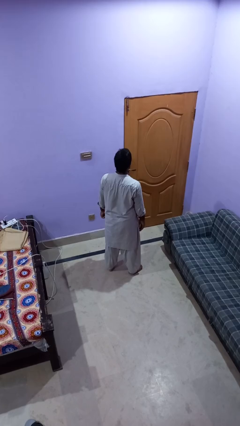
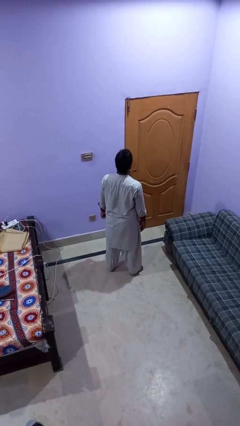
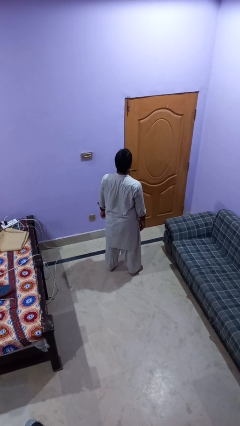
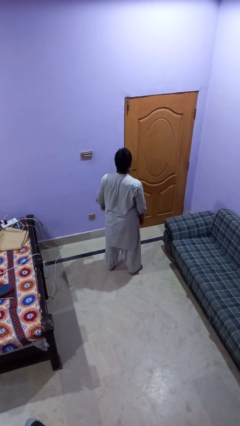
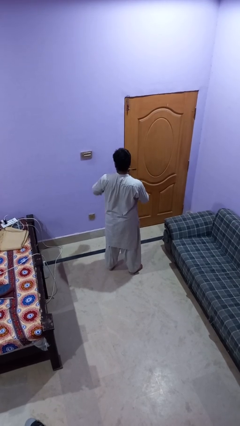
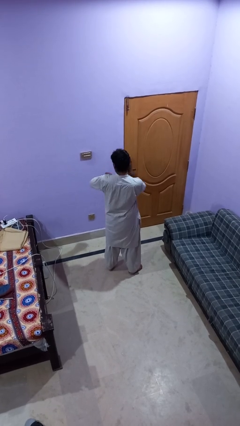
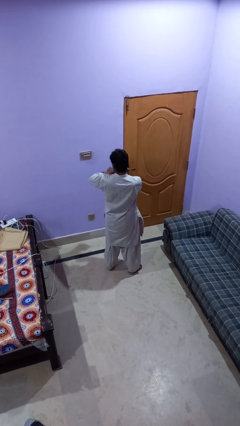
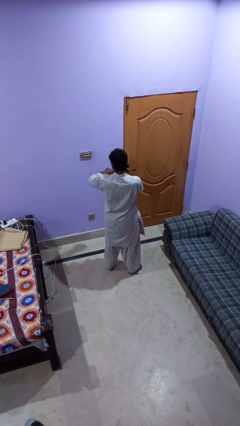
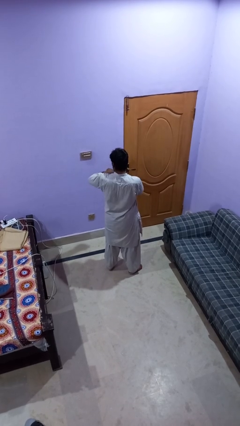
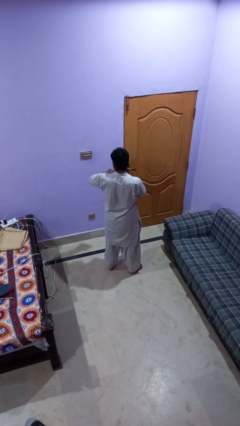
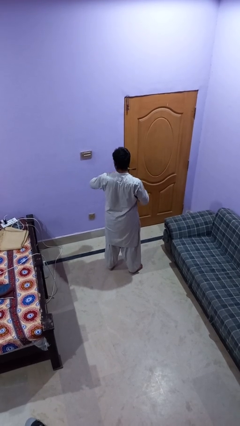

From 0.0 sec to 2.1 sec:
person swats bug

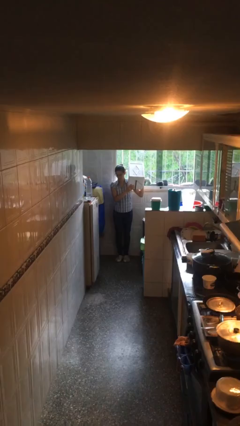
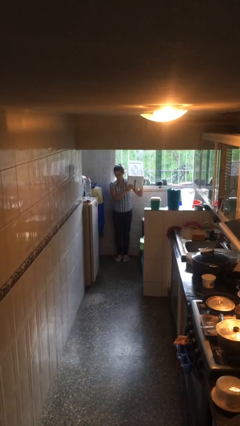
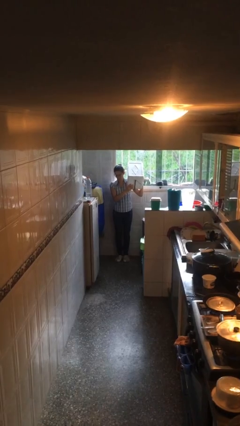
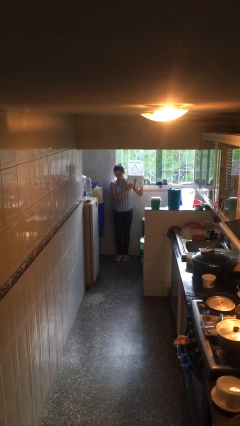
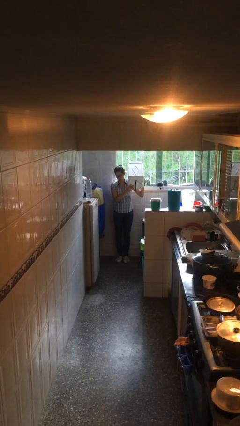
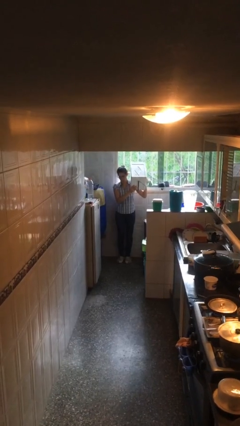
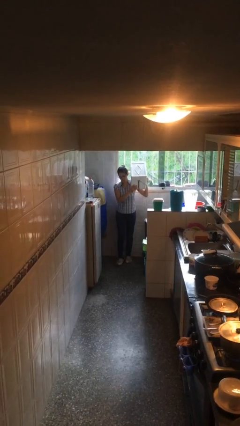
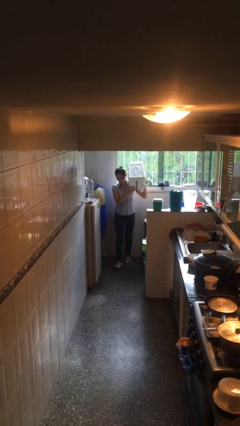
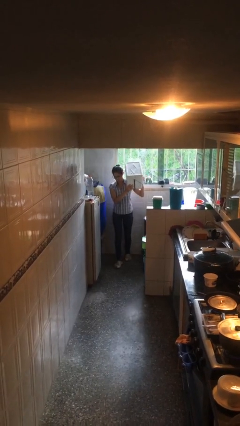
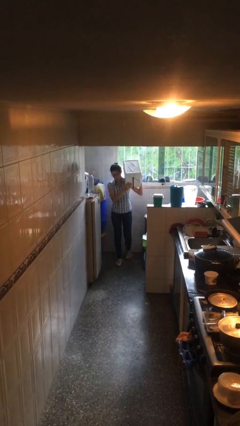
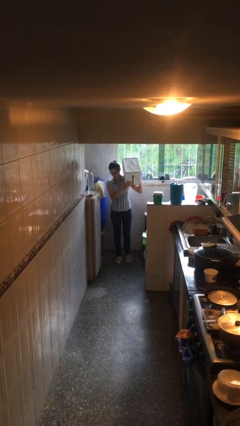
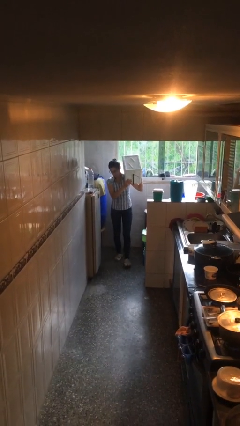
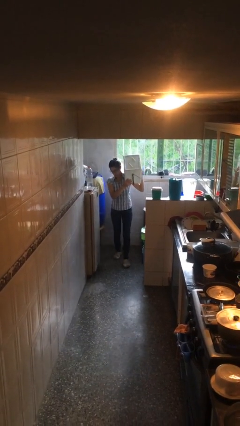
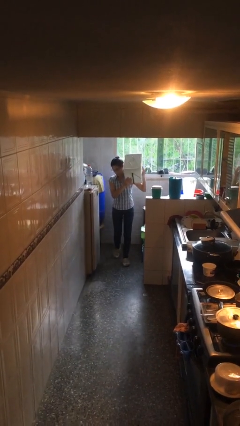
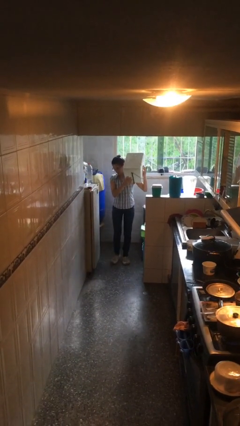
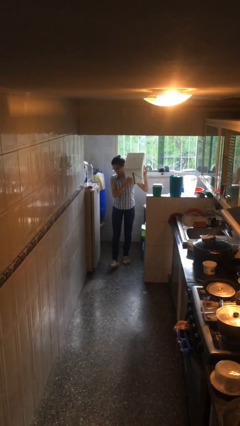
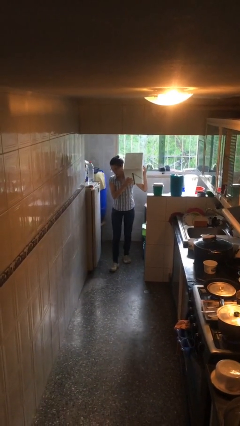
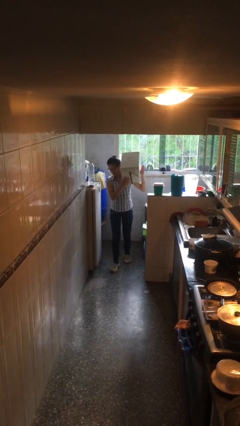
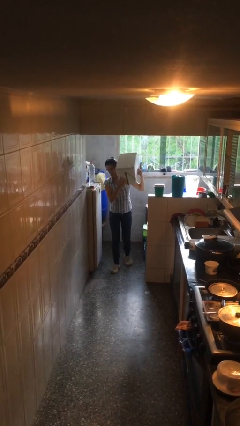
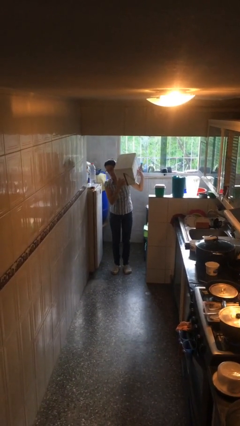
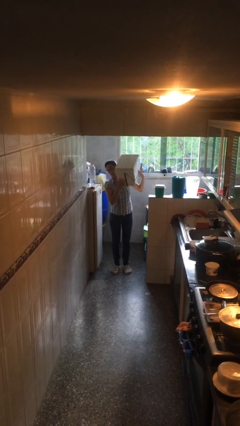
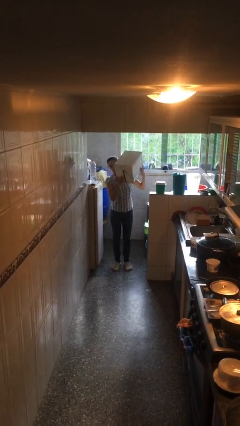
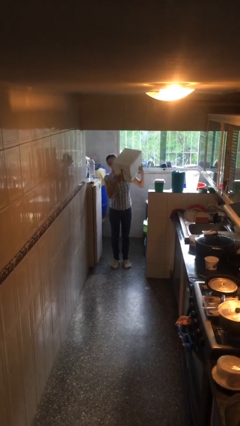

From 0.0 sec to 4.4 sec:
person carries heavy object

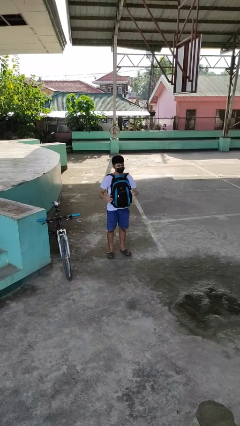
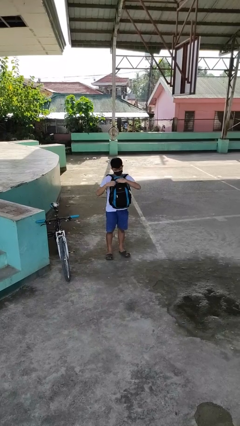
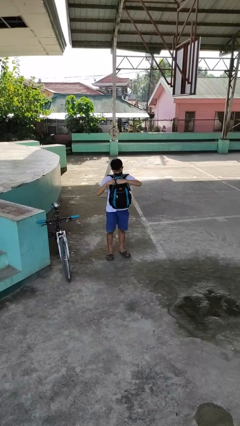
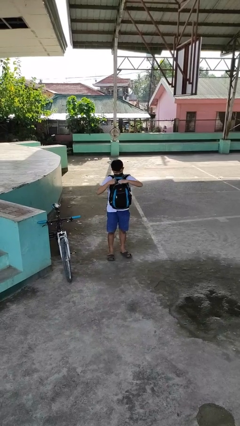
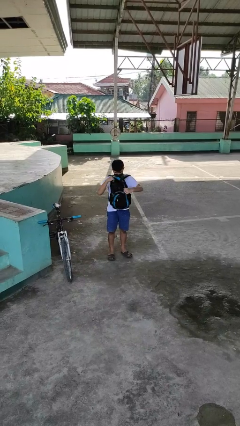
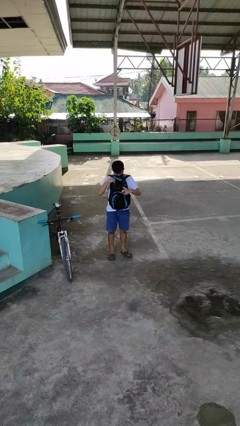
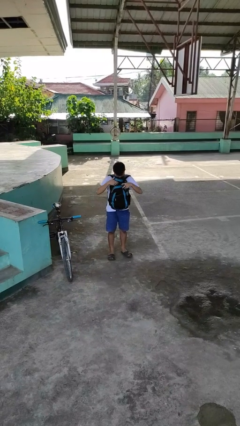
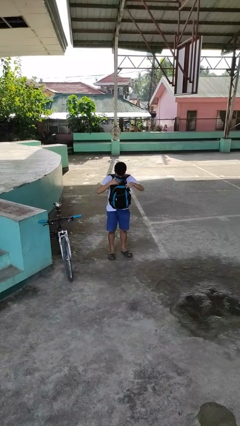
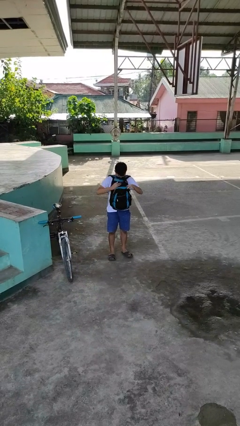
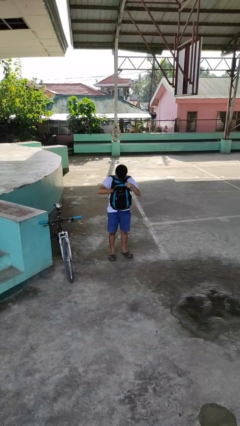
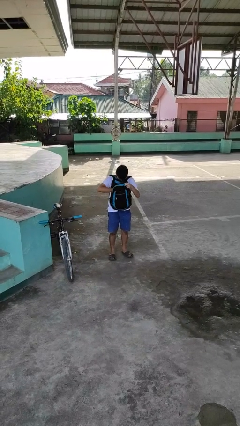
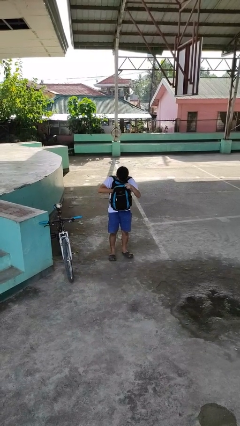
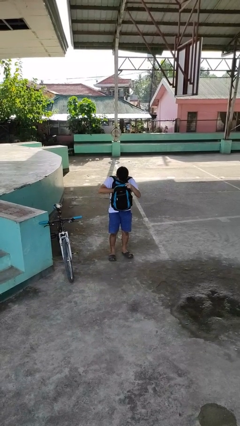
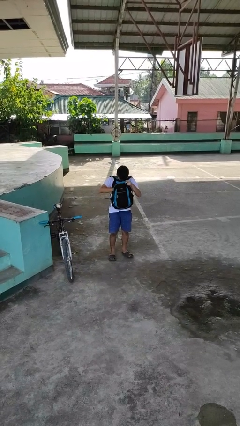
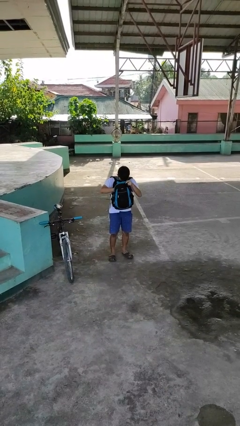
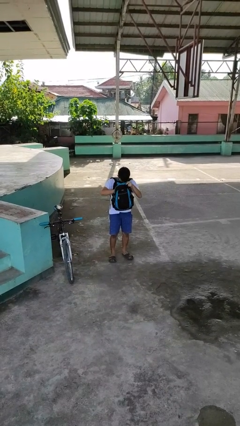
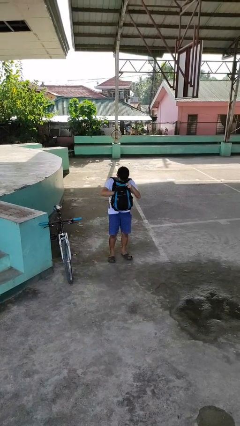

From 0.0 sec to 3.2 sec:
person searches in backpack

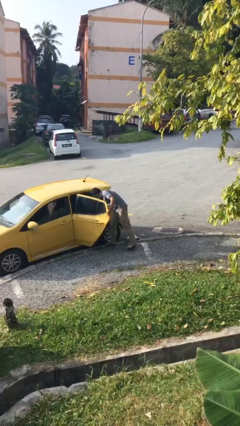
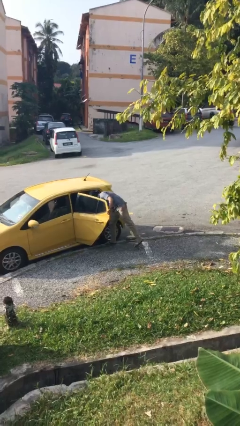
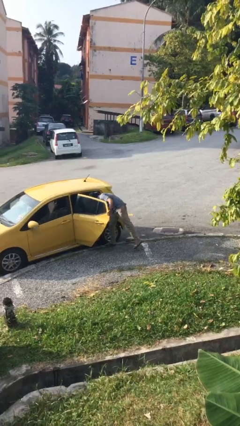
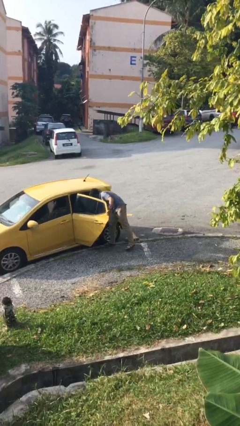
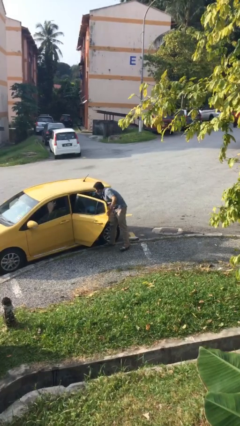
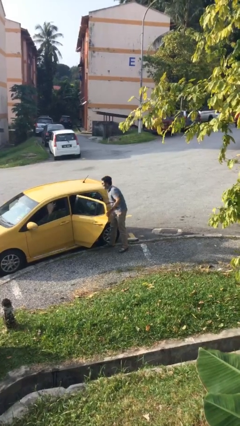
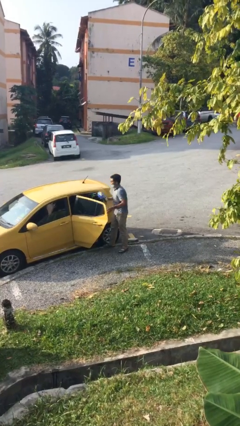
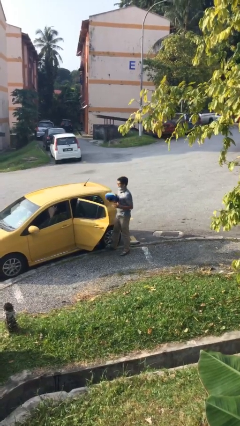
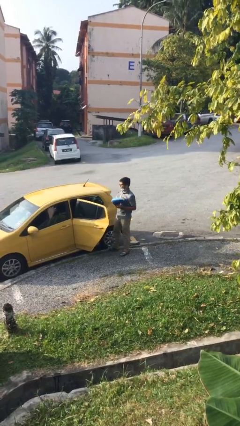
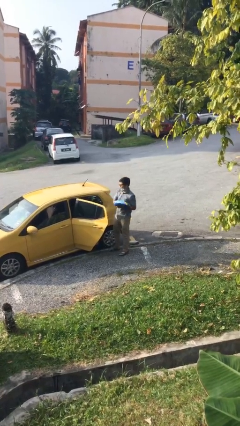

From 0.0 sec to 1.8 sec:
person unloads car

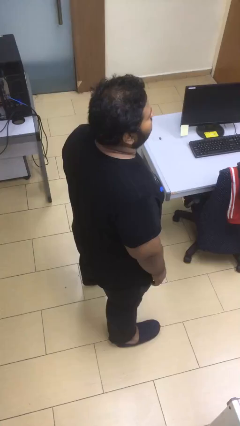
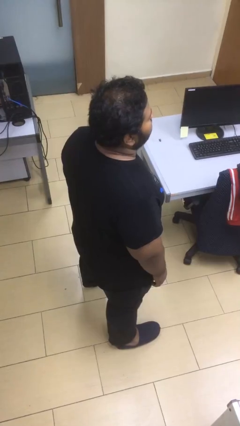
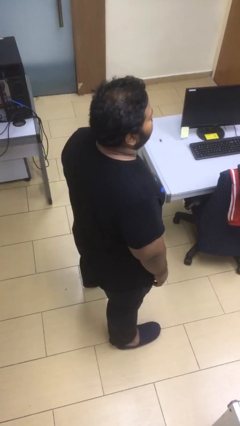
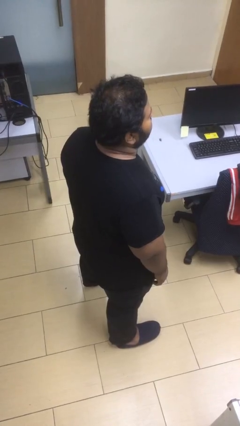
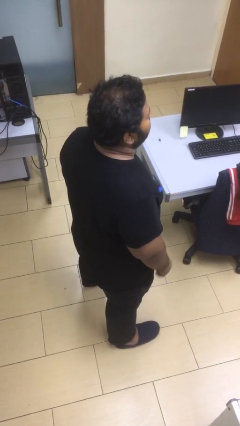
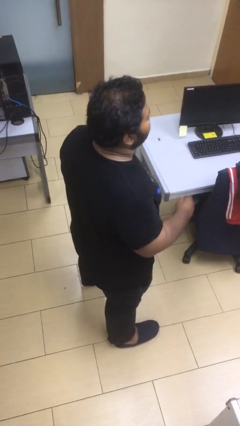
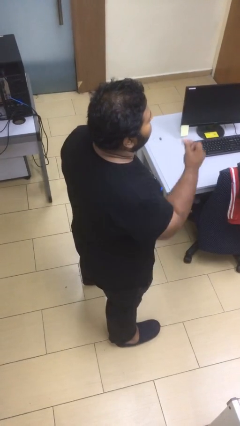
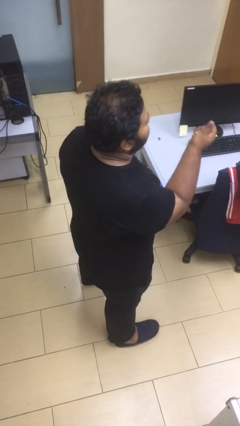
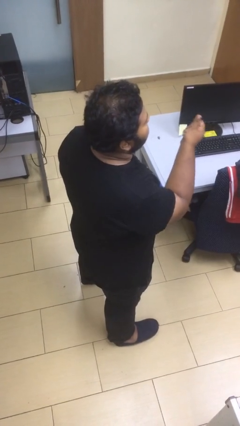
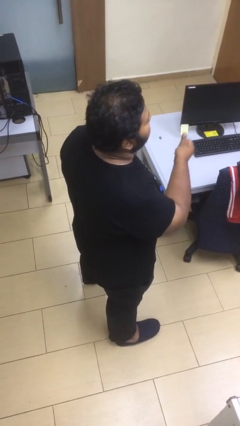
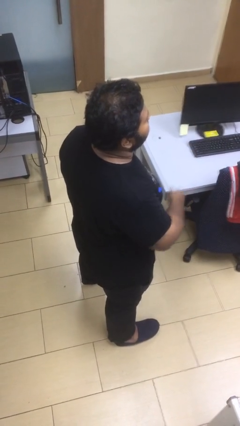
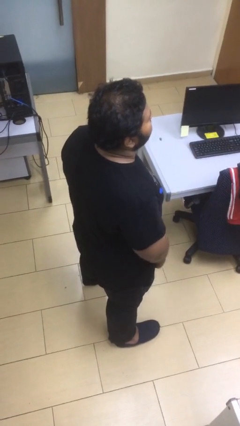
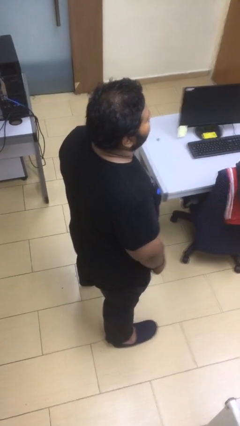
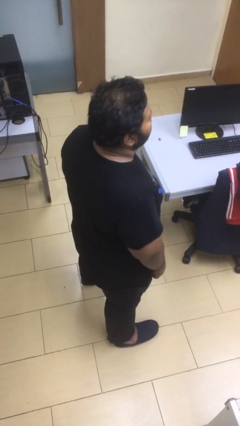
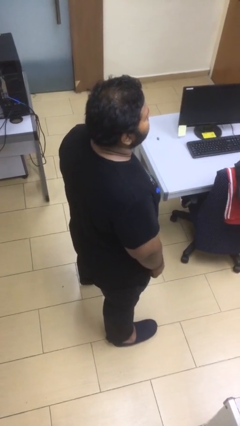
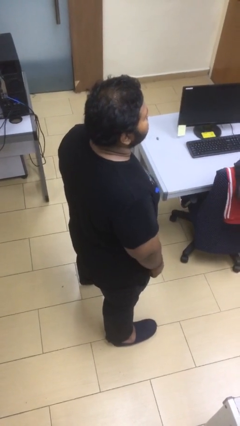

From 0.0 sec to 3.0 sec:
person snaps fingers

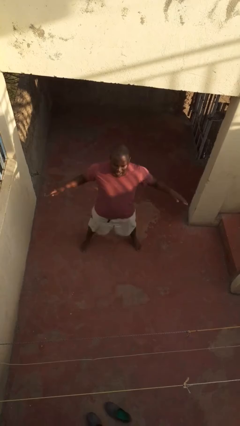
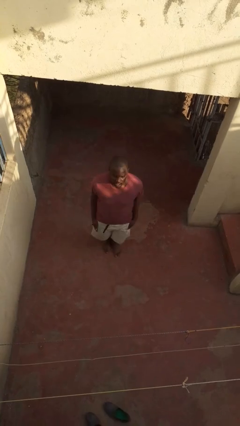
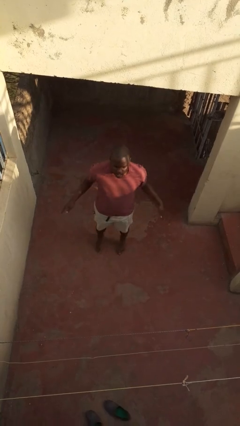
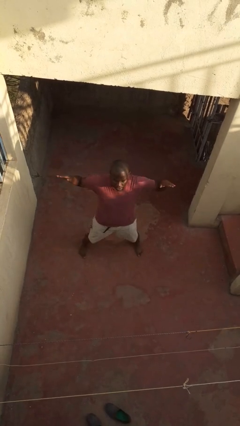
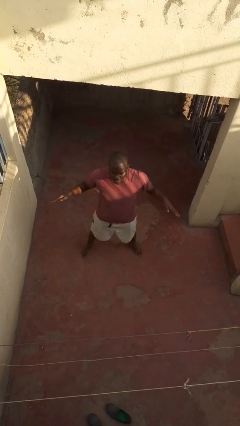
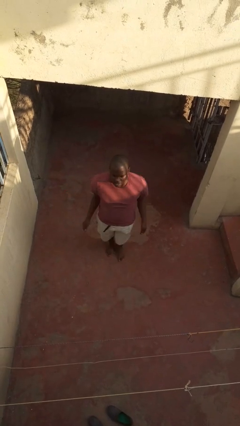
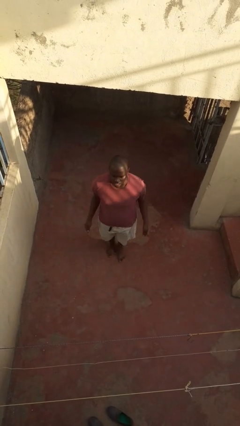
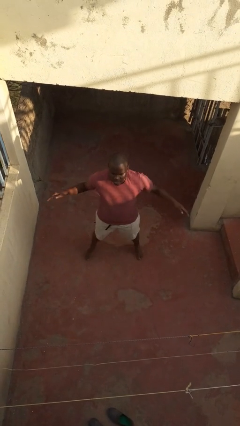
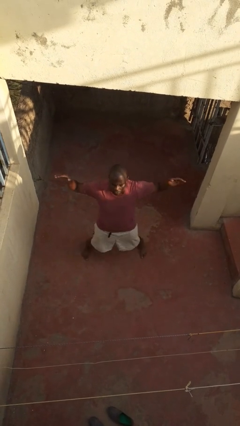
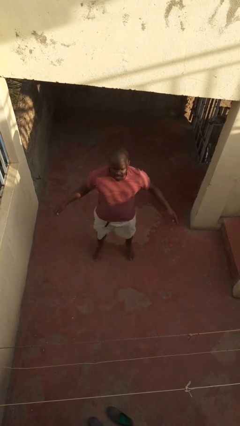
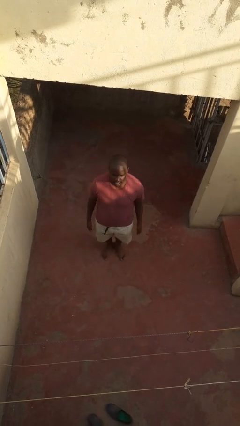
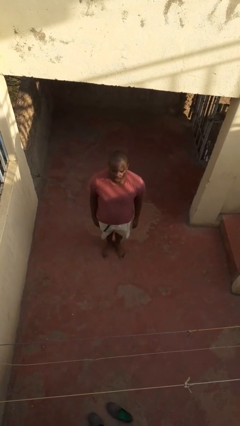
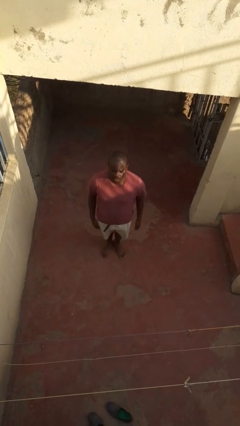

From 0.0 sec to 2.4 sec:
person exercises with jumping jacks

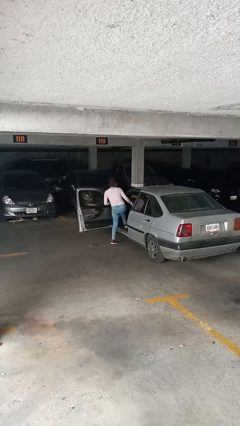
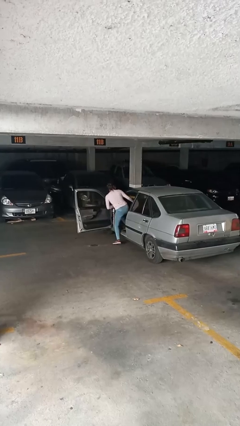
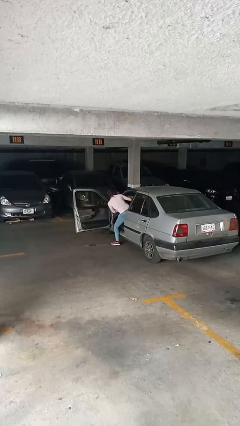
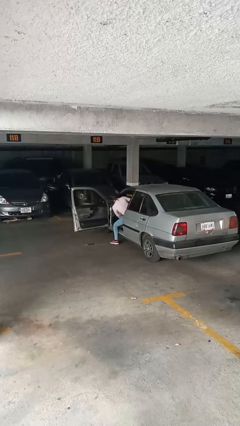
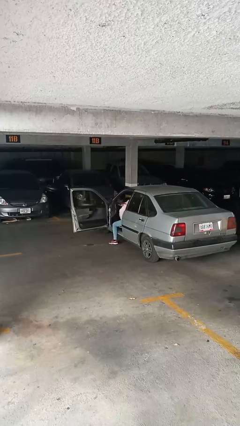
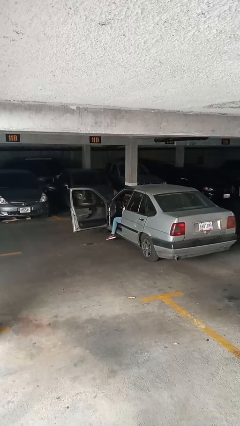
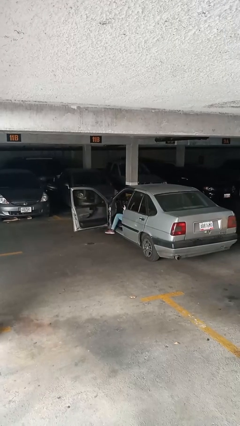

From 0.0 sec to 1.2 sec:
person enters car
